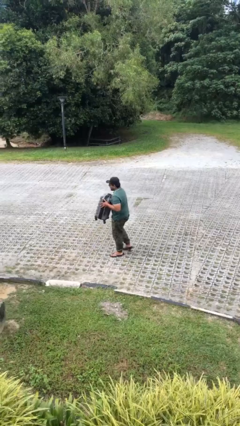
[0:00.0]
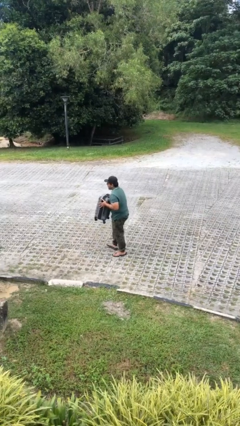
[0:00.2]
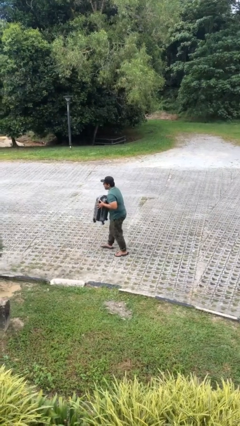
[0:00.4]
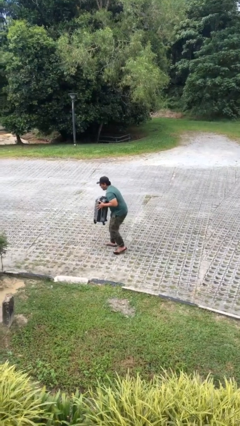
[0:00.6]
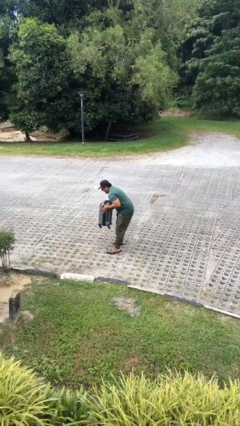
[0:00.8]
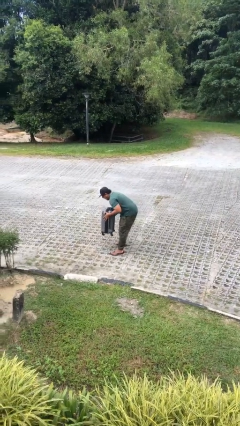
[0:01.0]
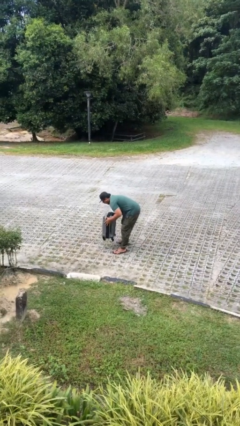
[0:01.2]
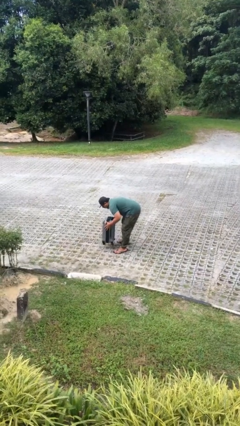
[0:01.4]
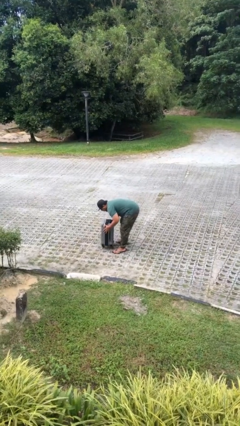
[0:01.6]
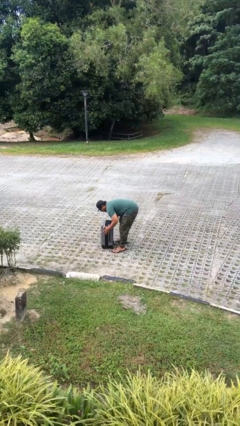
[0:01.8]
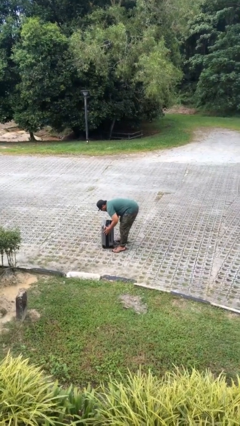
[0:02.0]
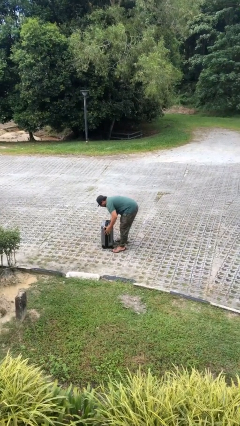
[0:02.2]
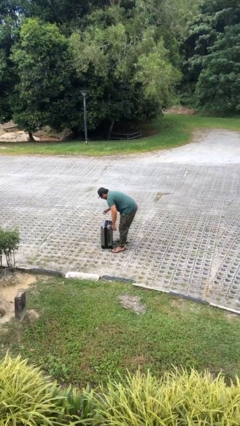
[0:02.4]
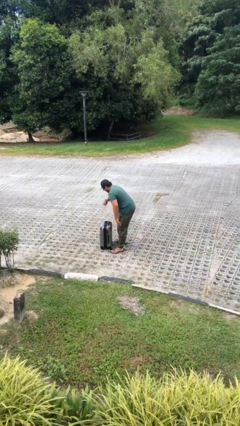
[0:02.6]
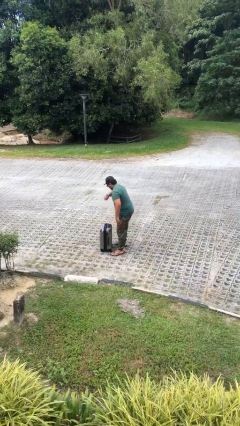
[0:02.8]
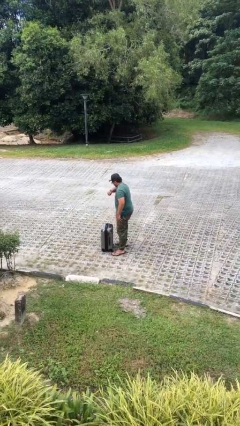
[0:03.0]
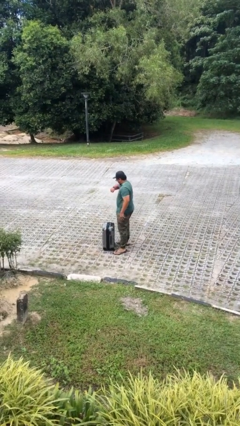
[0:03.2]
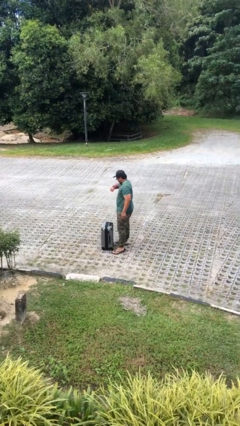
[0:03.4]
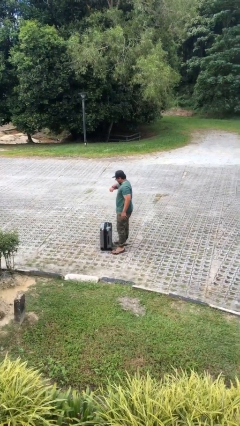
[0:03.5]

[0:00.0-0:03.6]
person puts down object on floor

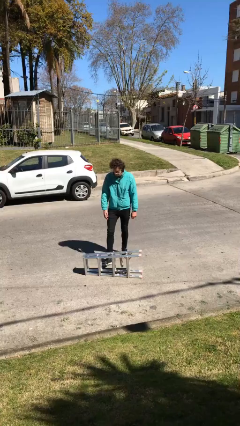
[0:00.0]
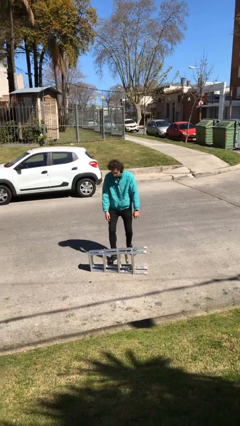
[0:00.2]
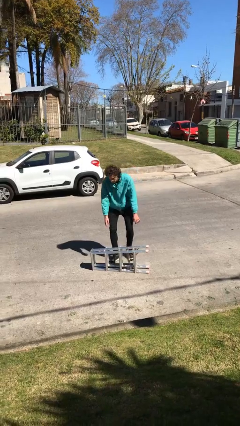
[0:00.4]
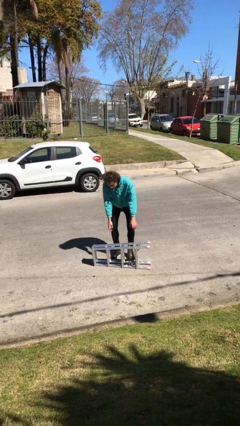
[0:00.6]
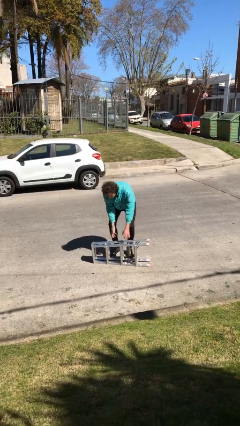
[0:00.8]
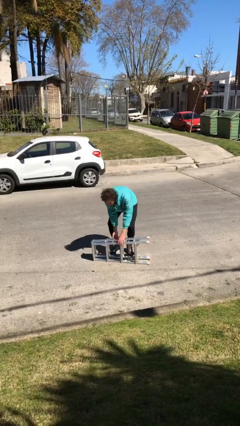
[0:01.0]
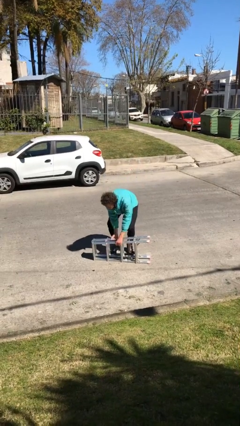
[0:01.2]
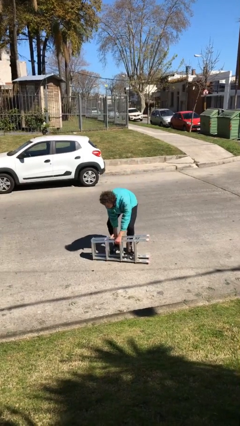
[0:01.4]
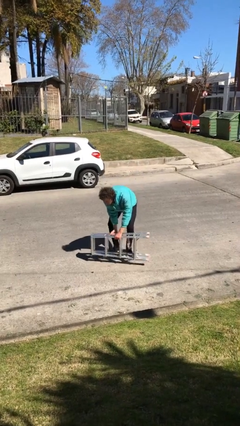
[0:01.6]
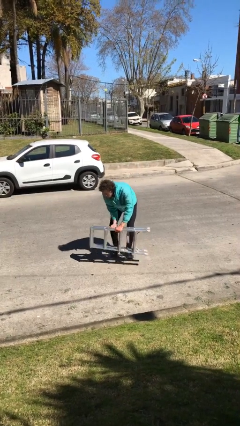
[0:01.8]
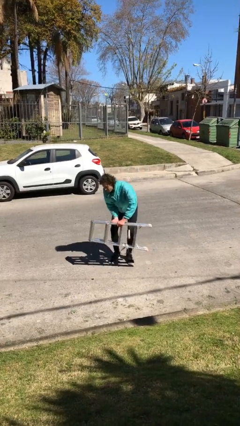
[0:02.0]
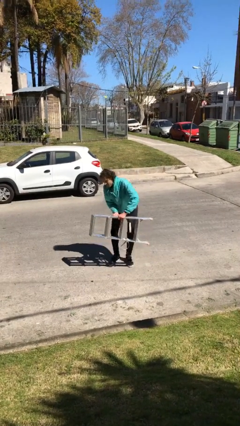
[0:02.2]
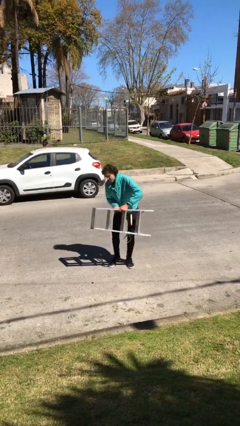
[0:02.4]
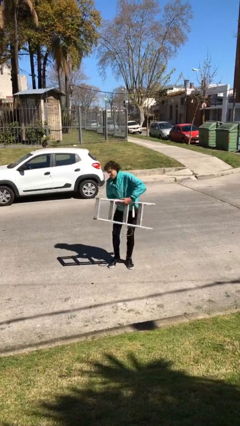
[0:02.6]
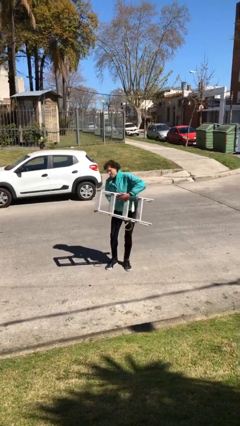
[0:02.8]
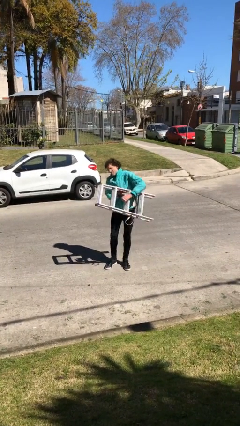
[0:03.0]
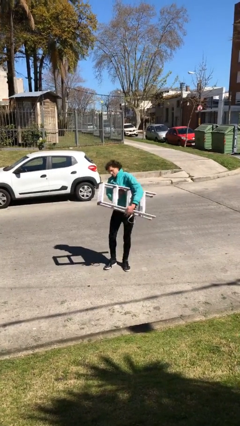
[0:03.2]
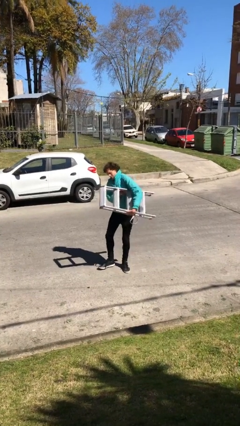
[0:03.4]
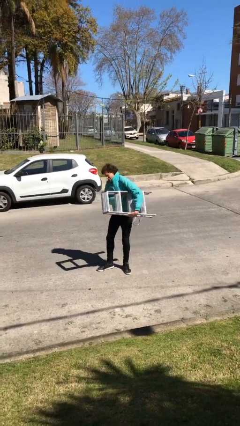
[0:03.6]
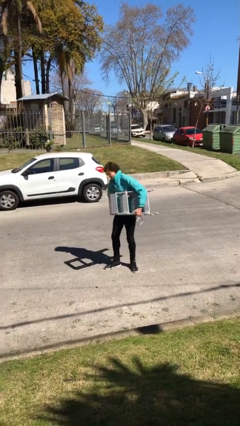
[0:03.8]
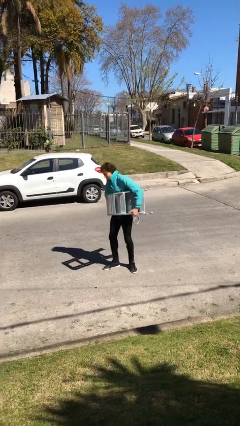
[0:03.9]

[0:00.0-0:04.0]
person picks up object from floor

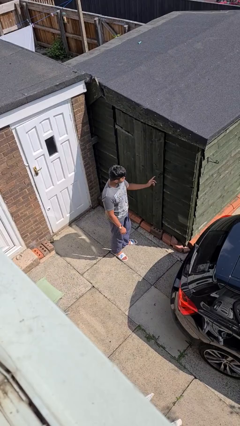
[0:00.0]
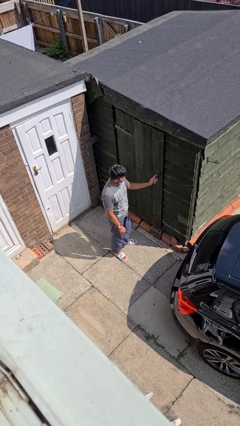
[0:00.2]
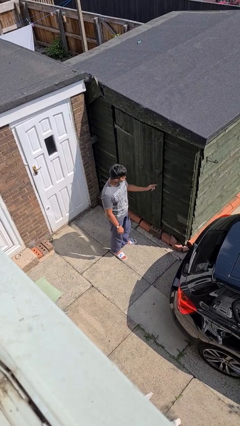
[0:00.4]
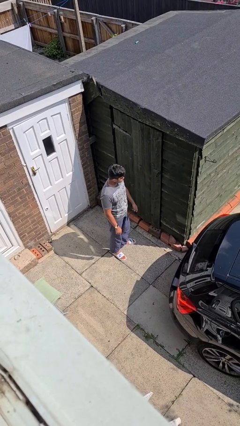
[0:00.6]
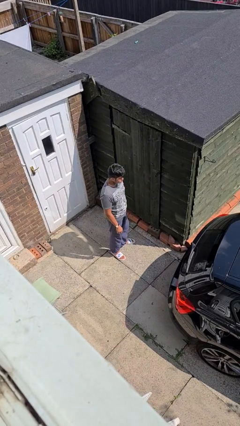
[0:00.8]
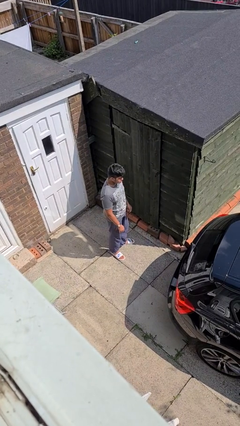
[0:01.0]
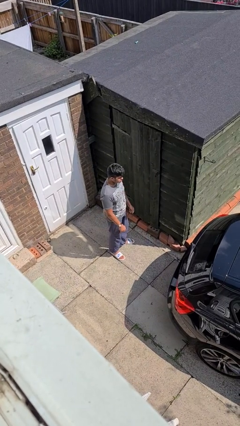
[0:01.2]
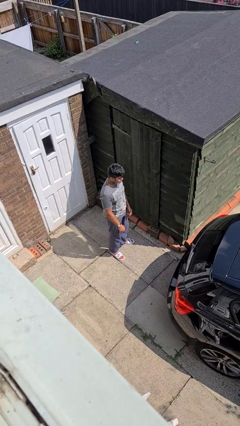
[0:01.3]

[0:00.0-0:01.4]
person taps object with finger

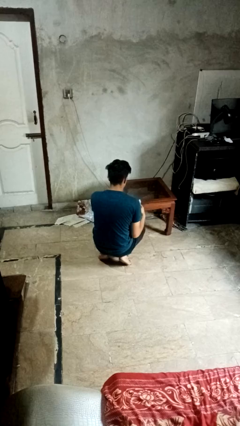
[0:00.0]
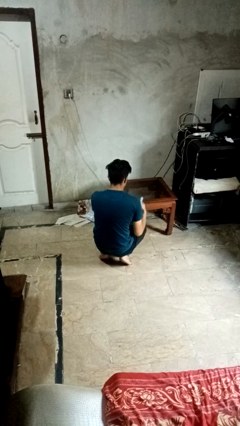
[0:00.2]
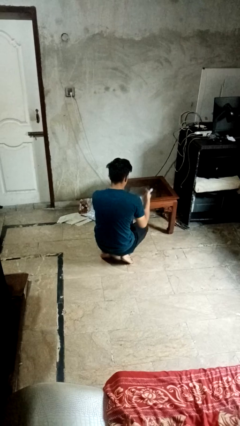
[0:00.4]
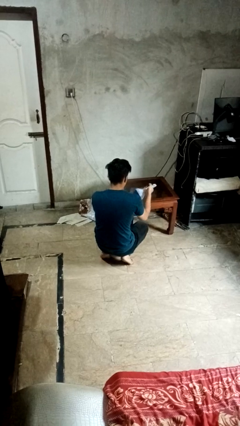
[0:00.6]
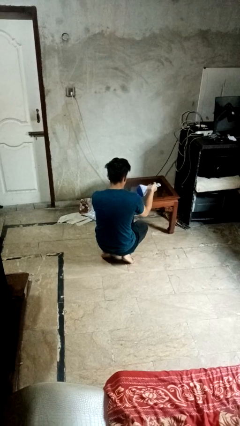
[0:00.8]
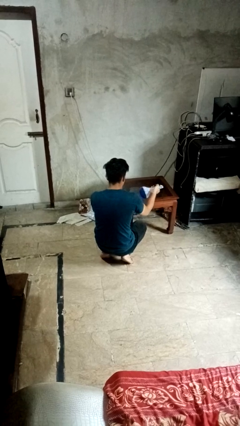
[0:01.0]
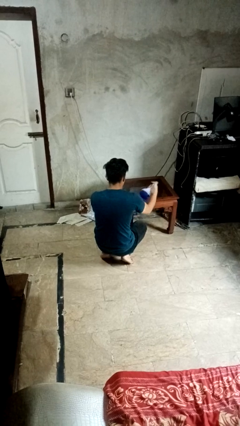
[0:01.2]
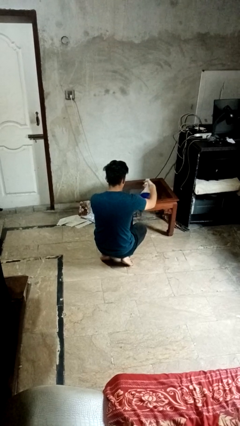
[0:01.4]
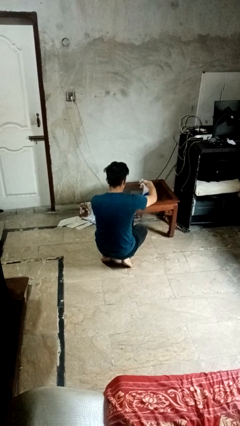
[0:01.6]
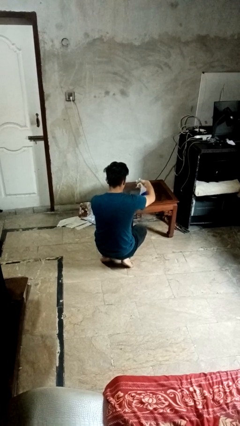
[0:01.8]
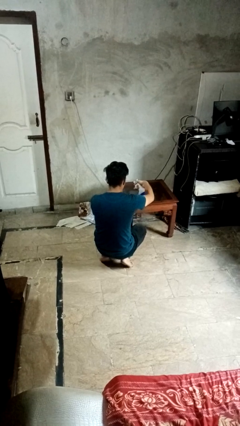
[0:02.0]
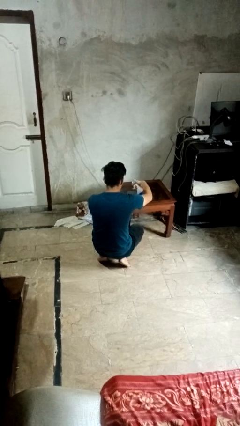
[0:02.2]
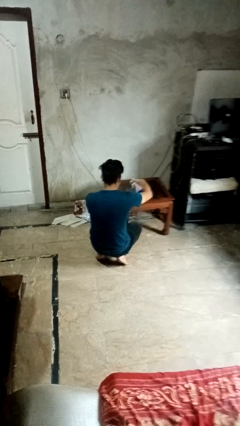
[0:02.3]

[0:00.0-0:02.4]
person sprays from bottle

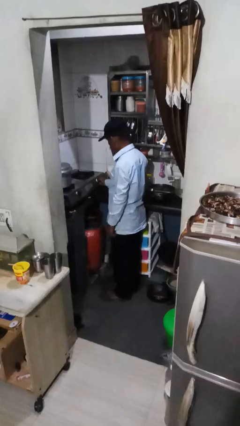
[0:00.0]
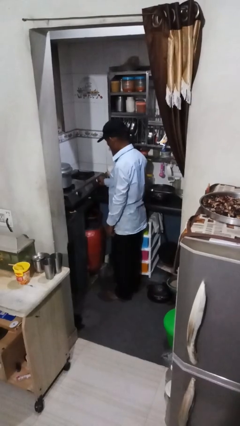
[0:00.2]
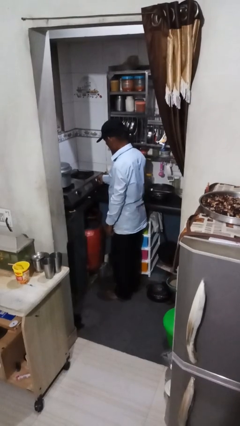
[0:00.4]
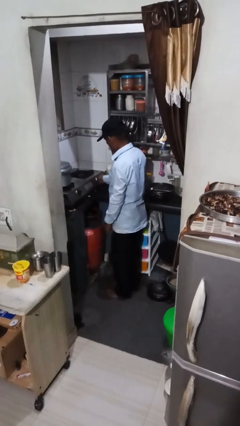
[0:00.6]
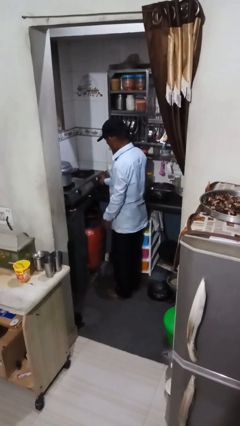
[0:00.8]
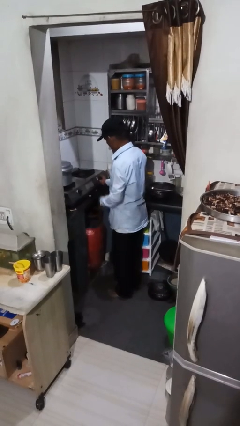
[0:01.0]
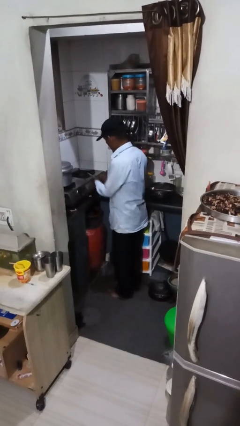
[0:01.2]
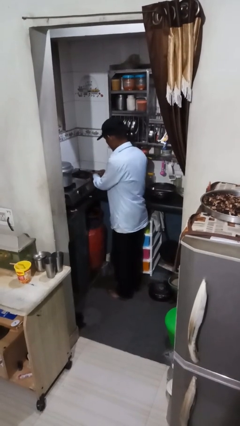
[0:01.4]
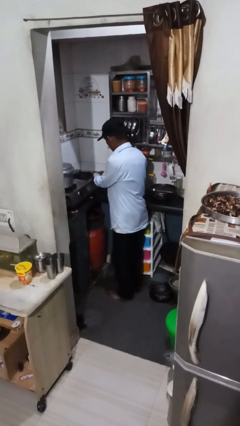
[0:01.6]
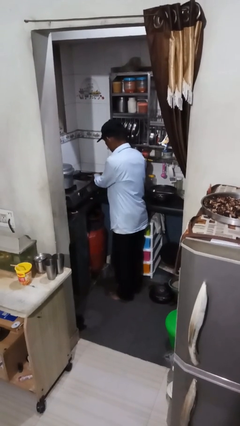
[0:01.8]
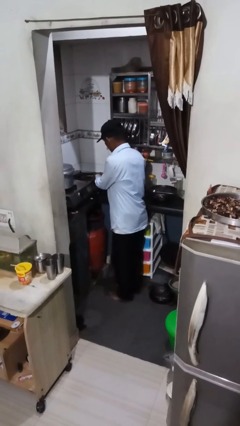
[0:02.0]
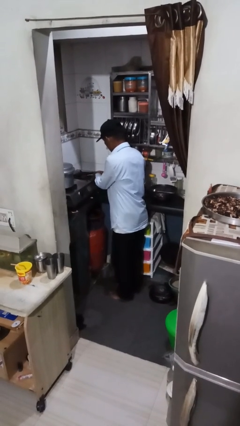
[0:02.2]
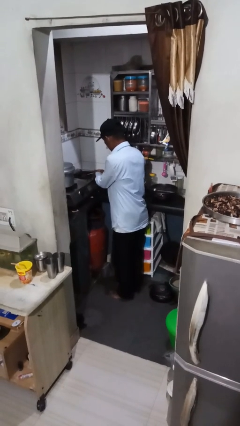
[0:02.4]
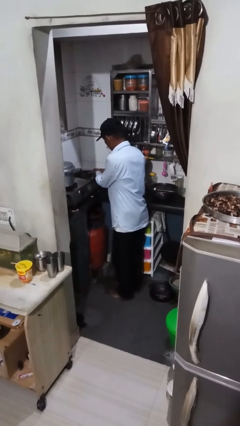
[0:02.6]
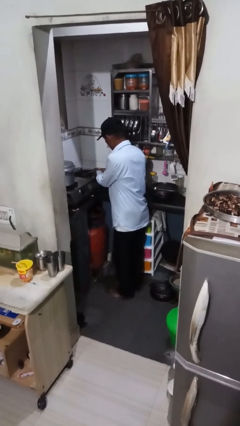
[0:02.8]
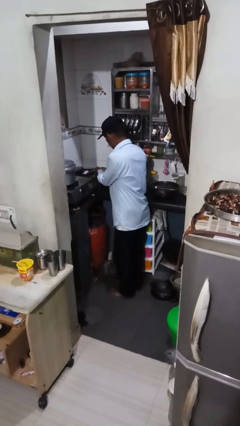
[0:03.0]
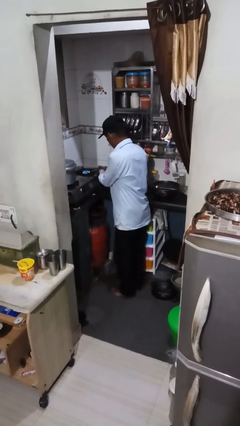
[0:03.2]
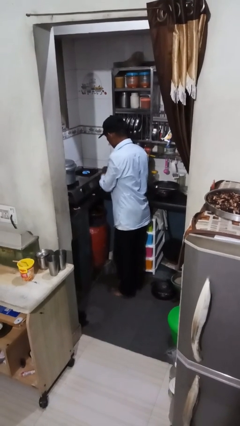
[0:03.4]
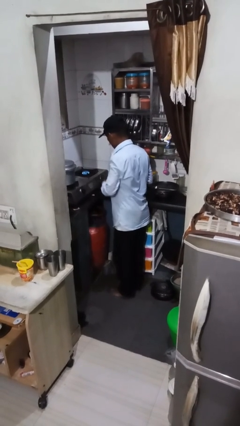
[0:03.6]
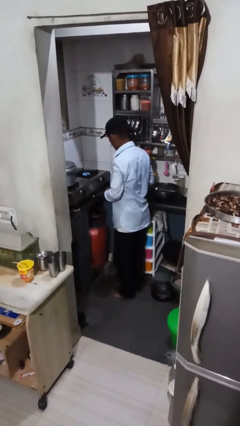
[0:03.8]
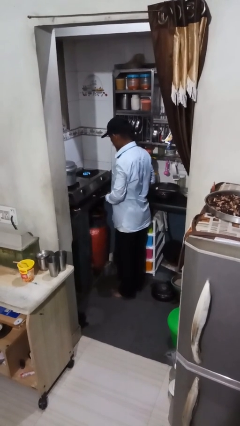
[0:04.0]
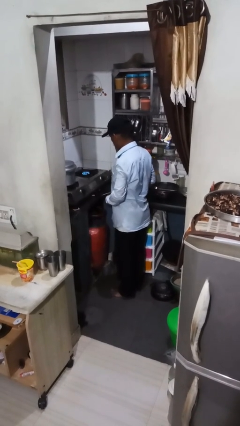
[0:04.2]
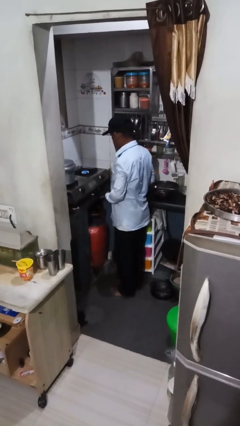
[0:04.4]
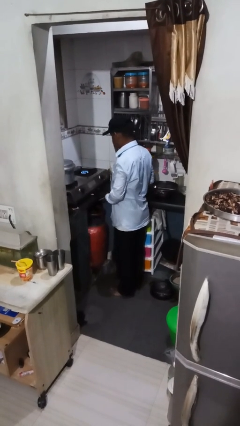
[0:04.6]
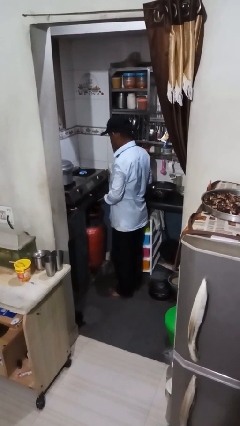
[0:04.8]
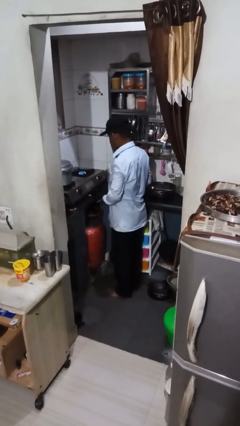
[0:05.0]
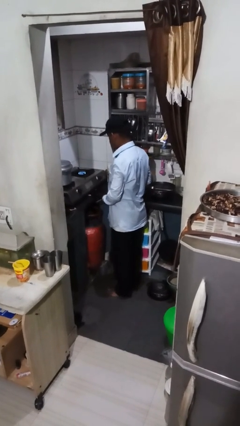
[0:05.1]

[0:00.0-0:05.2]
person turns on stovetop

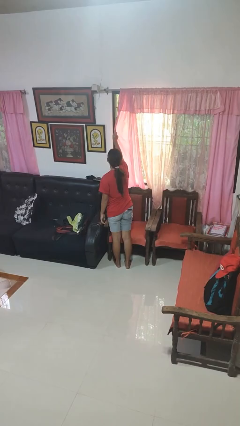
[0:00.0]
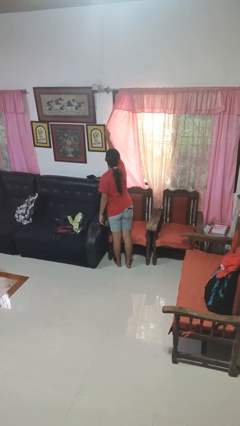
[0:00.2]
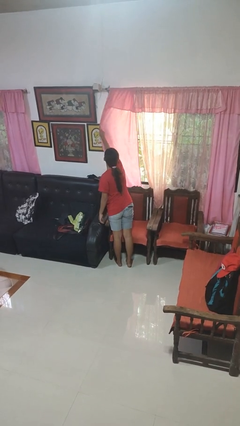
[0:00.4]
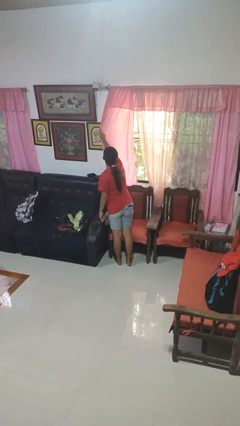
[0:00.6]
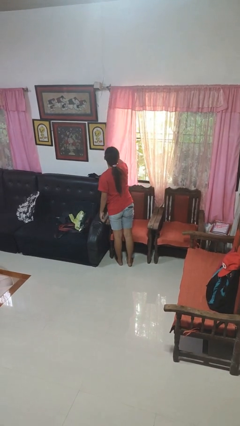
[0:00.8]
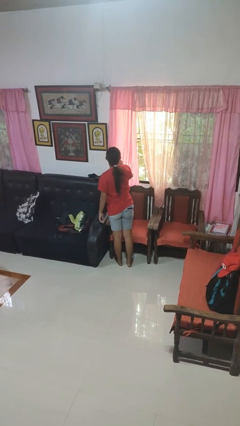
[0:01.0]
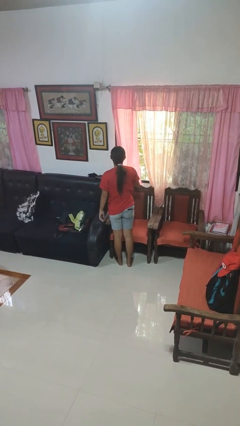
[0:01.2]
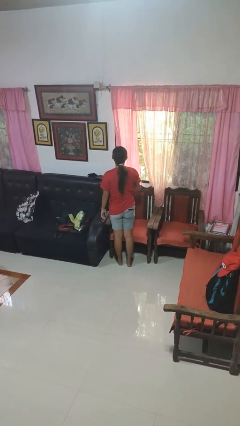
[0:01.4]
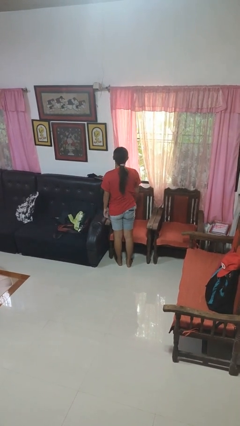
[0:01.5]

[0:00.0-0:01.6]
person closes curtains
